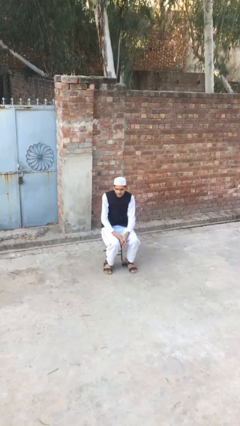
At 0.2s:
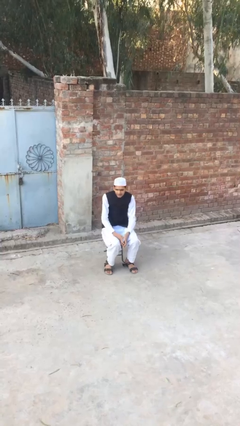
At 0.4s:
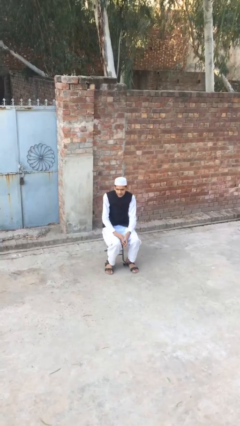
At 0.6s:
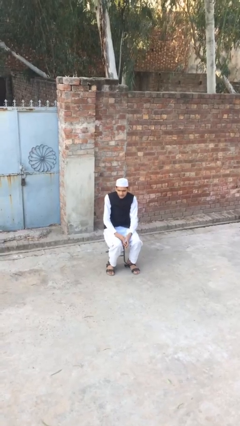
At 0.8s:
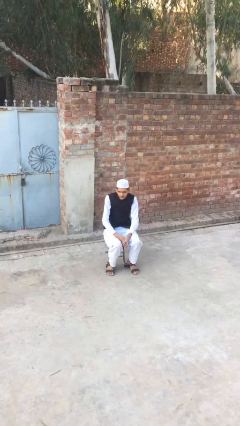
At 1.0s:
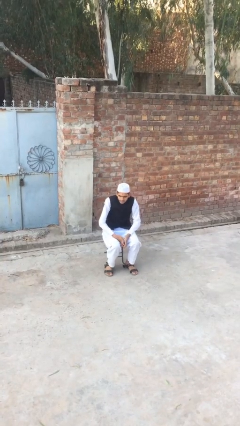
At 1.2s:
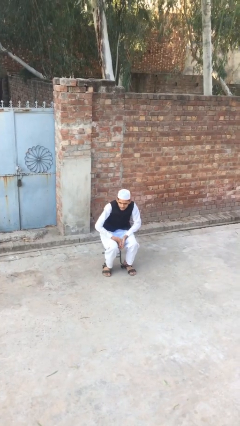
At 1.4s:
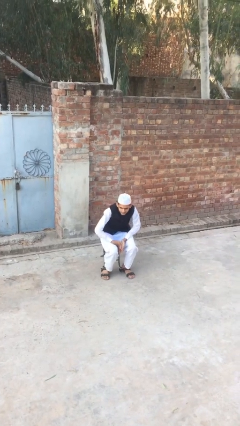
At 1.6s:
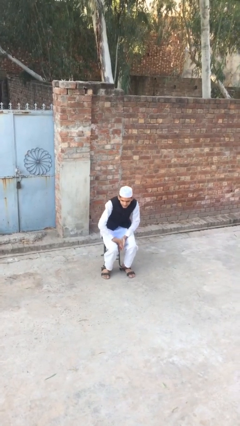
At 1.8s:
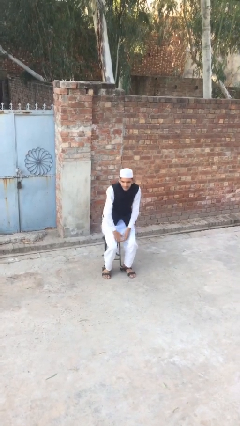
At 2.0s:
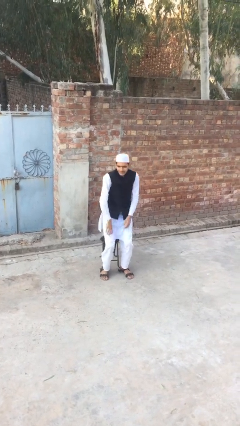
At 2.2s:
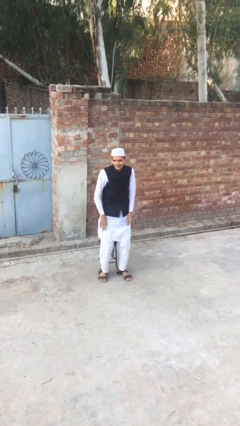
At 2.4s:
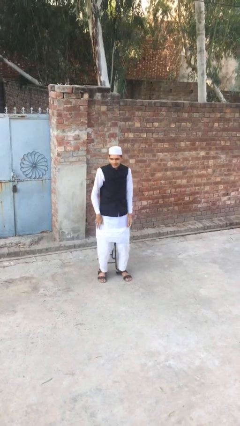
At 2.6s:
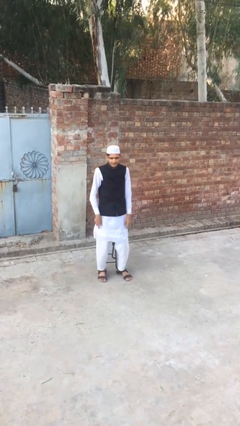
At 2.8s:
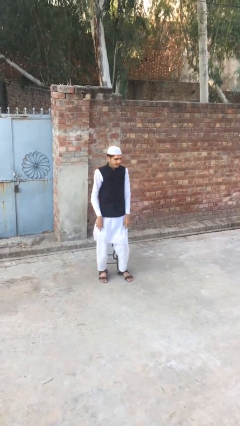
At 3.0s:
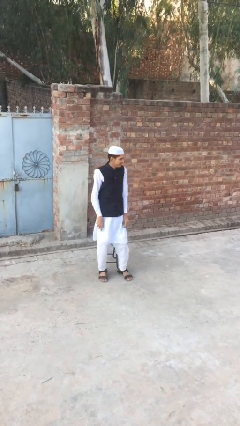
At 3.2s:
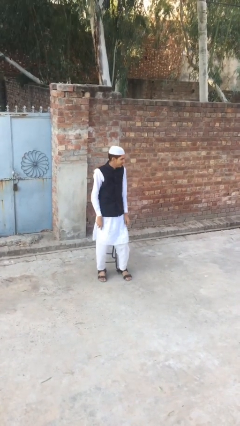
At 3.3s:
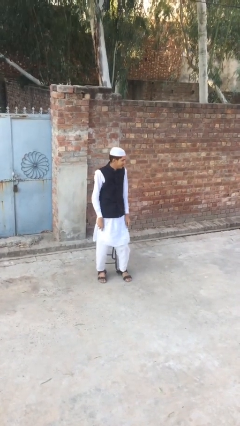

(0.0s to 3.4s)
person stands up

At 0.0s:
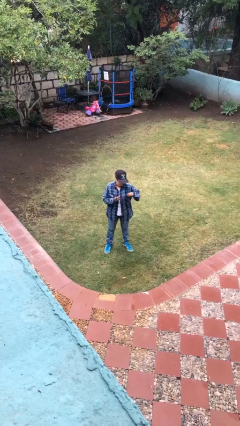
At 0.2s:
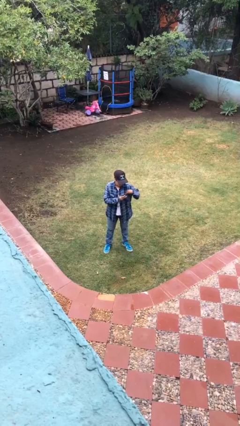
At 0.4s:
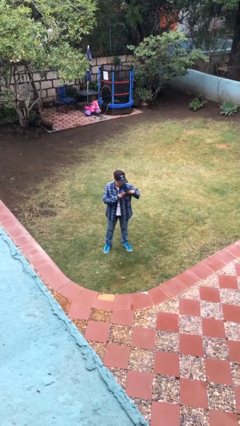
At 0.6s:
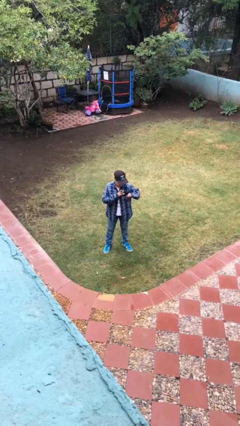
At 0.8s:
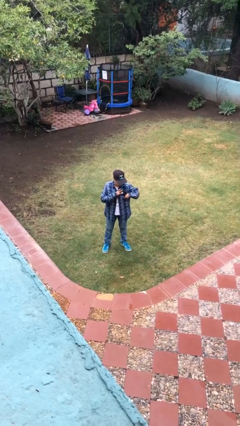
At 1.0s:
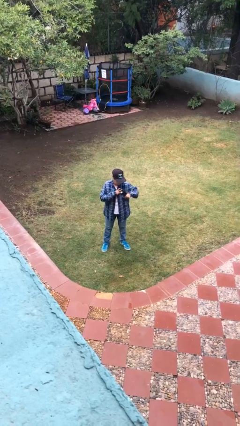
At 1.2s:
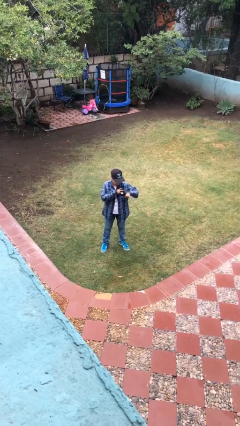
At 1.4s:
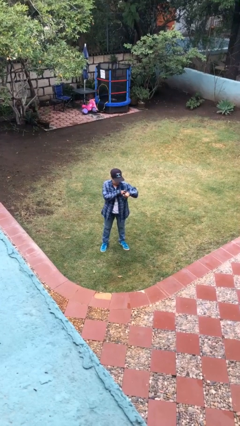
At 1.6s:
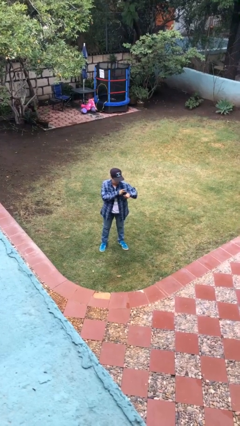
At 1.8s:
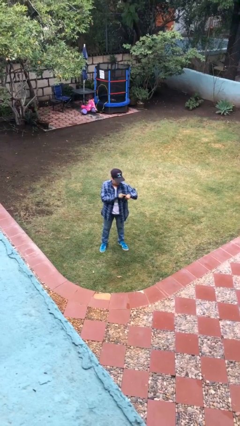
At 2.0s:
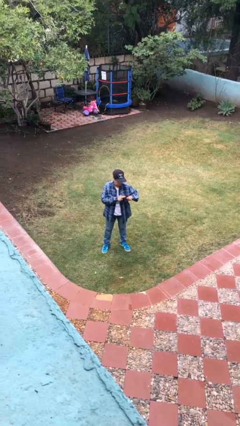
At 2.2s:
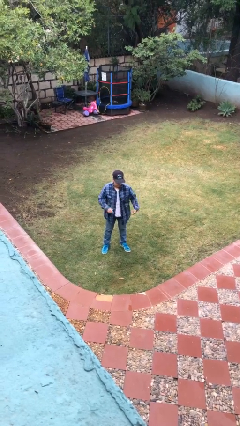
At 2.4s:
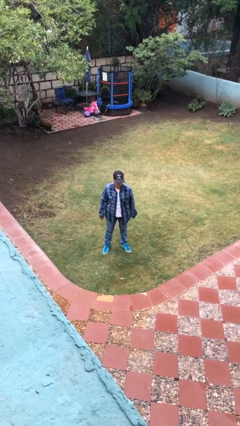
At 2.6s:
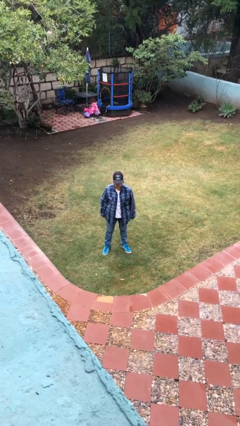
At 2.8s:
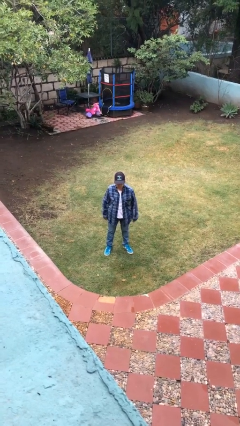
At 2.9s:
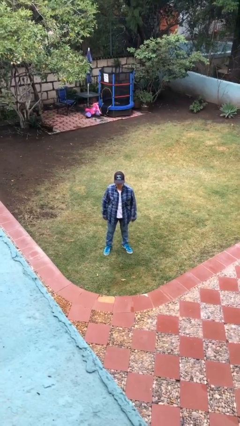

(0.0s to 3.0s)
person puts phone into pocket

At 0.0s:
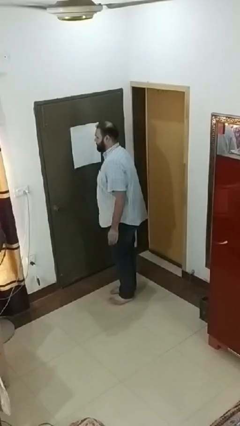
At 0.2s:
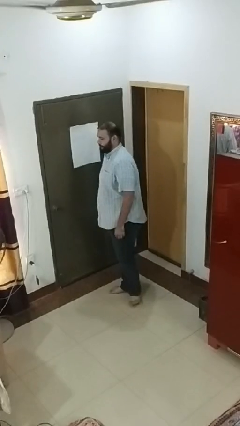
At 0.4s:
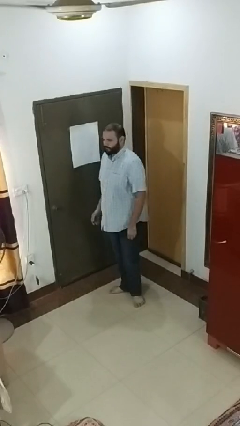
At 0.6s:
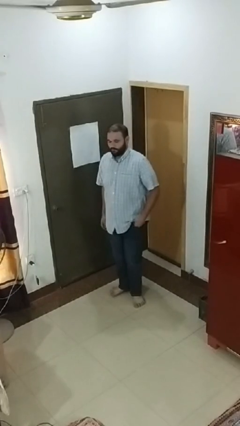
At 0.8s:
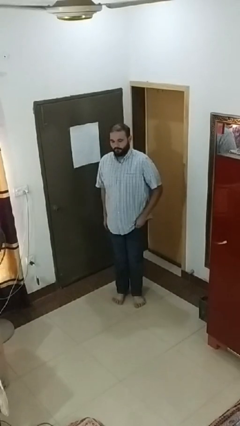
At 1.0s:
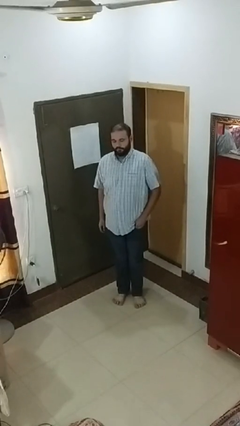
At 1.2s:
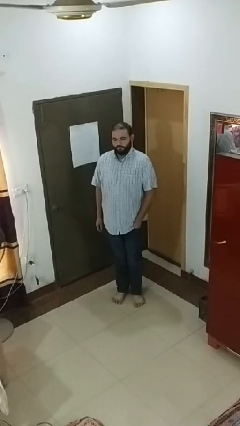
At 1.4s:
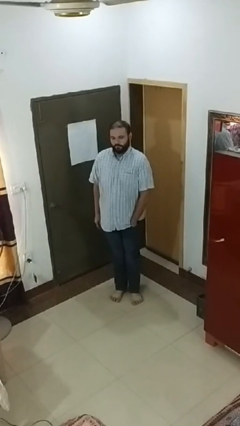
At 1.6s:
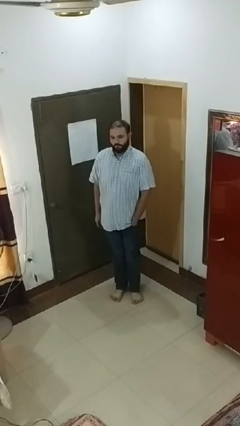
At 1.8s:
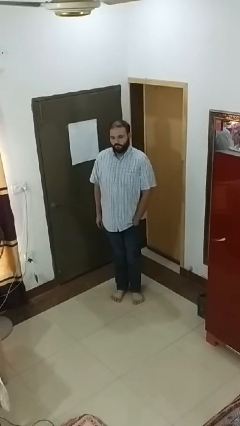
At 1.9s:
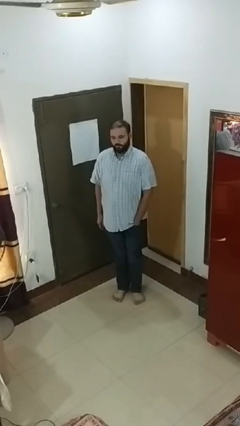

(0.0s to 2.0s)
person puts hands in back pockets

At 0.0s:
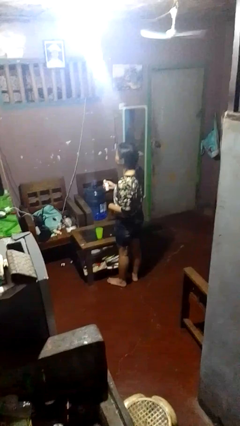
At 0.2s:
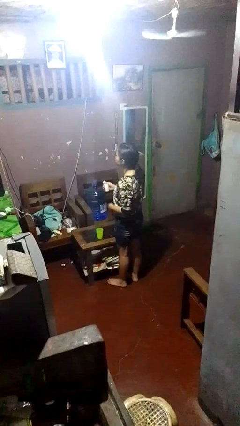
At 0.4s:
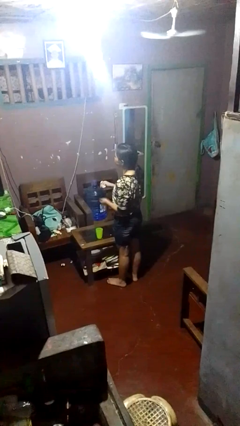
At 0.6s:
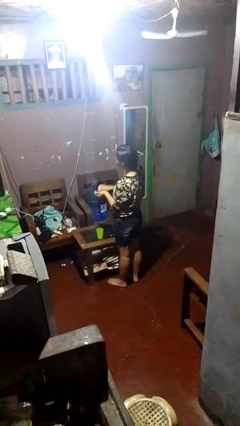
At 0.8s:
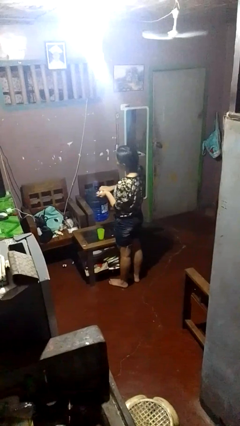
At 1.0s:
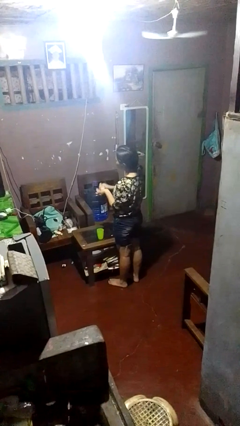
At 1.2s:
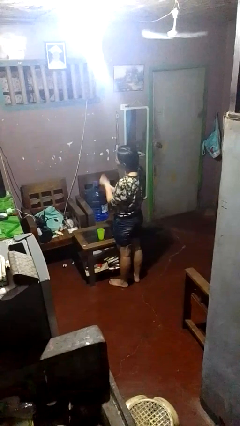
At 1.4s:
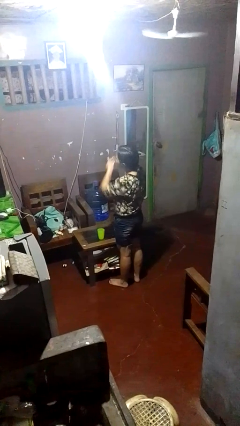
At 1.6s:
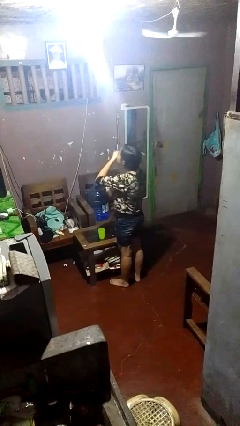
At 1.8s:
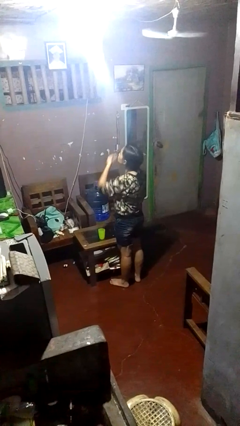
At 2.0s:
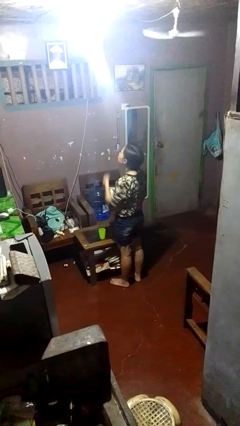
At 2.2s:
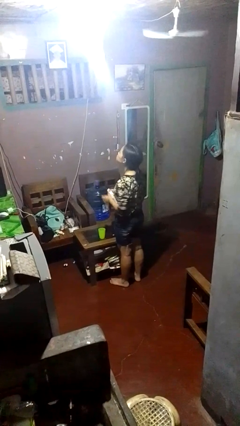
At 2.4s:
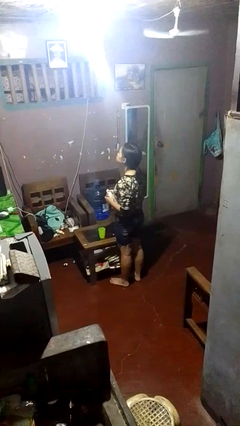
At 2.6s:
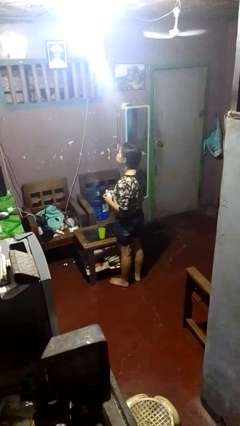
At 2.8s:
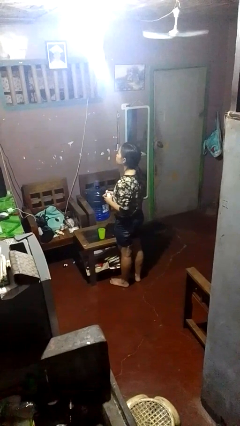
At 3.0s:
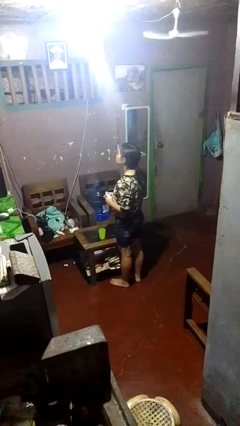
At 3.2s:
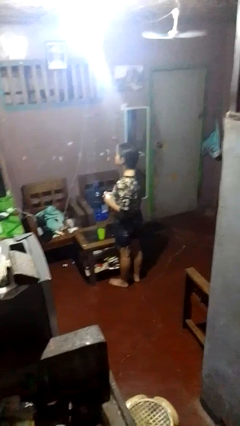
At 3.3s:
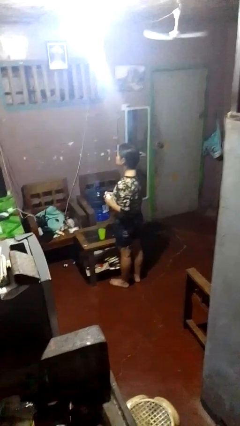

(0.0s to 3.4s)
person takes medicine pills

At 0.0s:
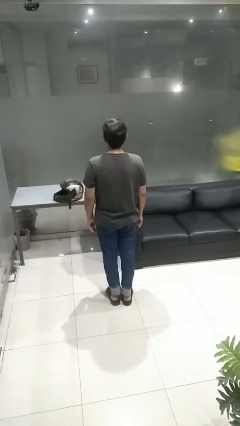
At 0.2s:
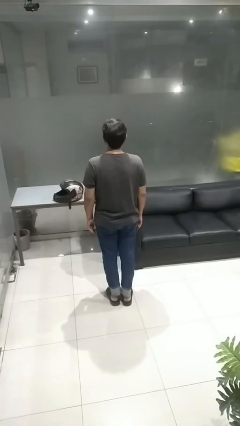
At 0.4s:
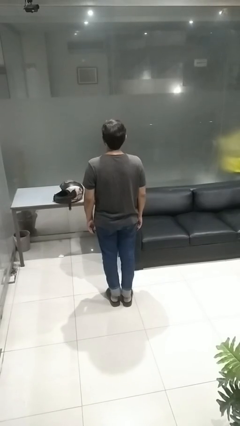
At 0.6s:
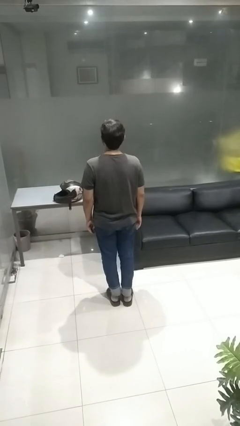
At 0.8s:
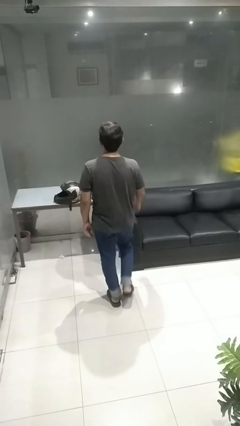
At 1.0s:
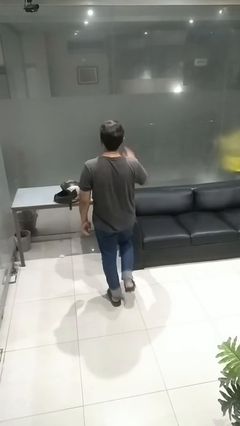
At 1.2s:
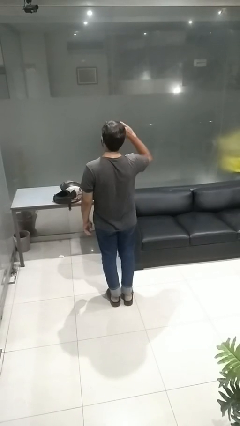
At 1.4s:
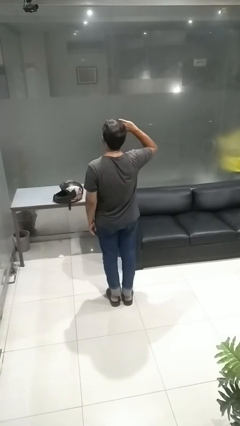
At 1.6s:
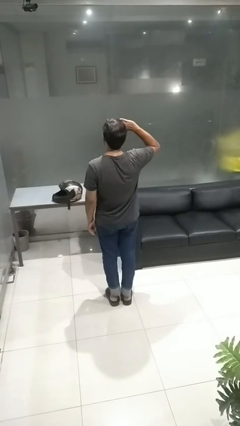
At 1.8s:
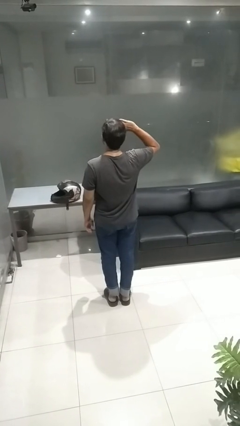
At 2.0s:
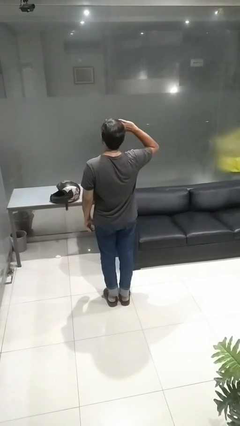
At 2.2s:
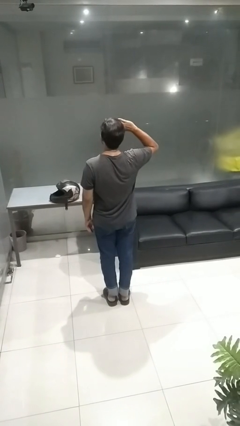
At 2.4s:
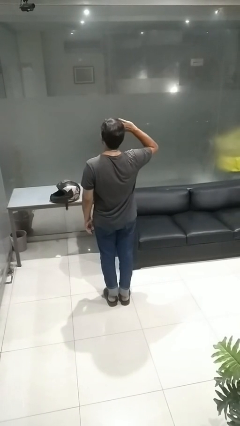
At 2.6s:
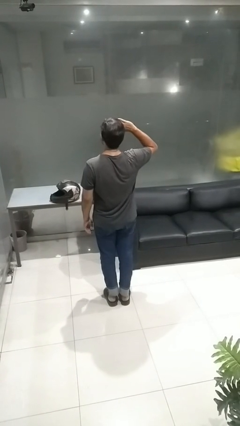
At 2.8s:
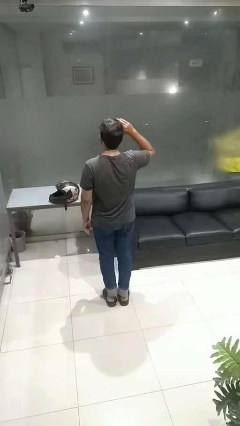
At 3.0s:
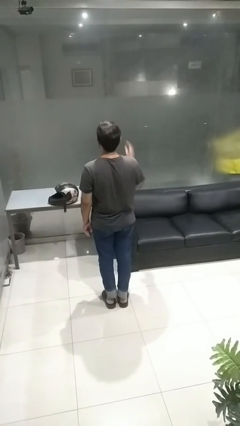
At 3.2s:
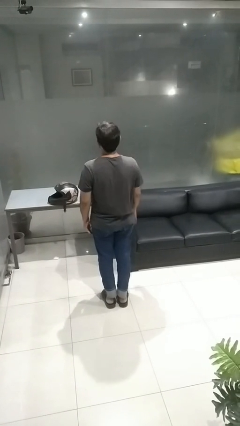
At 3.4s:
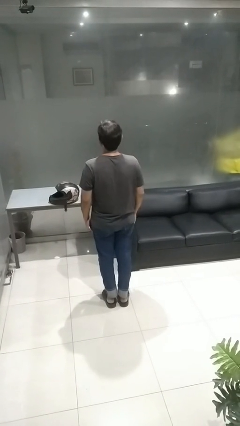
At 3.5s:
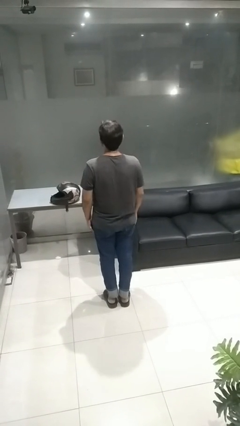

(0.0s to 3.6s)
person salutes

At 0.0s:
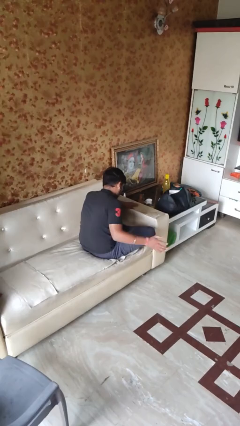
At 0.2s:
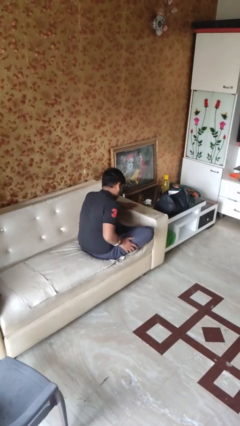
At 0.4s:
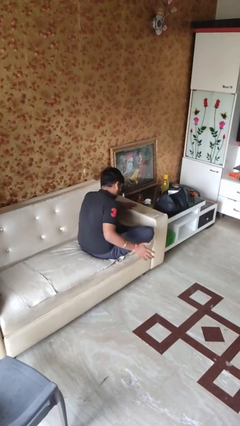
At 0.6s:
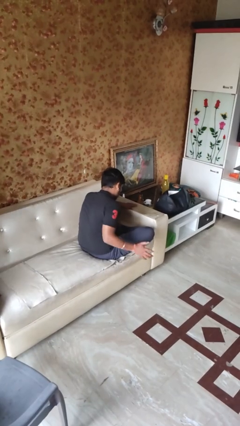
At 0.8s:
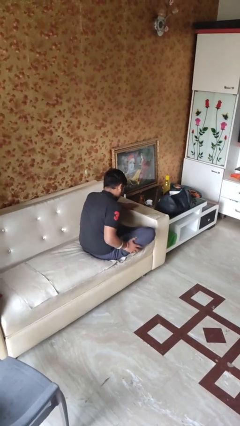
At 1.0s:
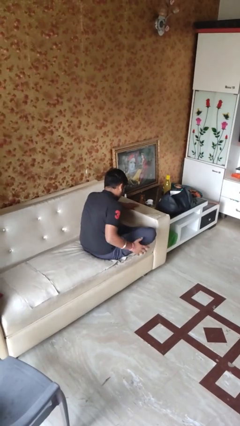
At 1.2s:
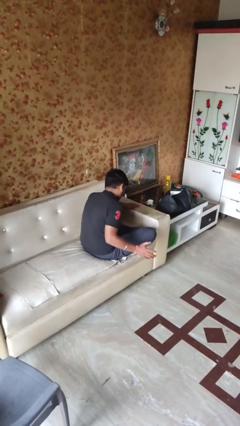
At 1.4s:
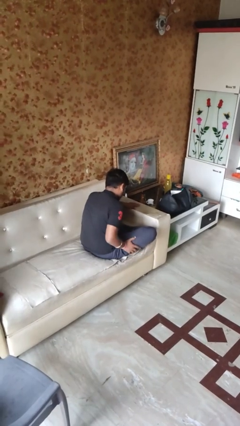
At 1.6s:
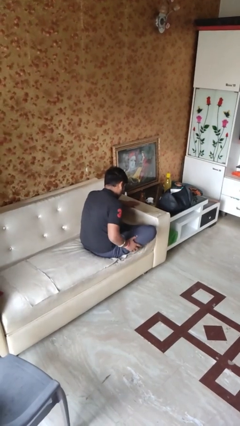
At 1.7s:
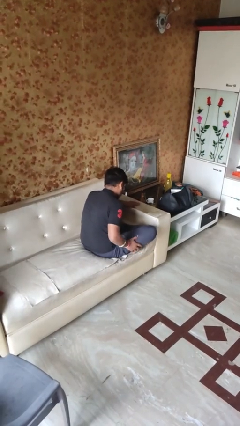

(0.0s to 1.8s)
person slaps hands on thighs

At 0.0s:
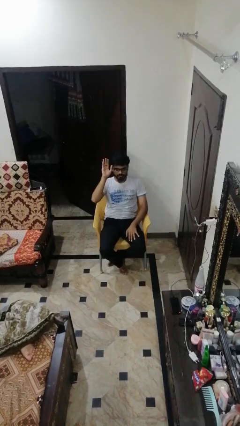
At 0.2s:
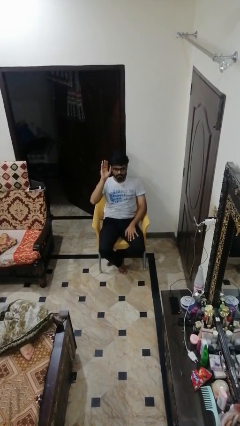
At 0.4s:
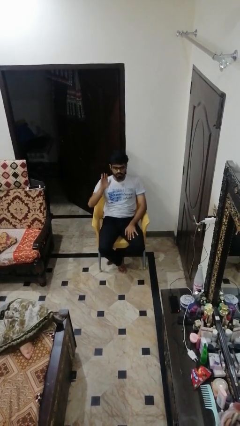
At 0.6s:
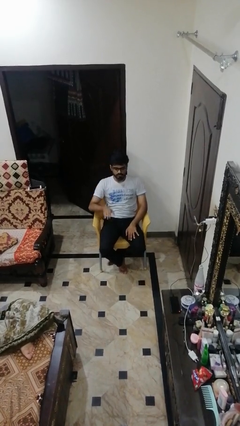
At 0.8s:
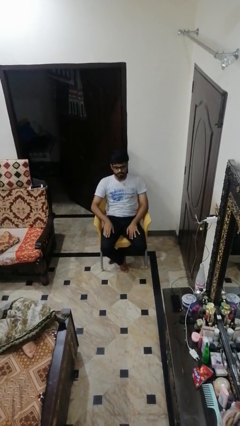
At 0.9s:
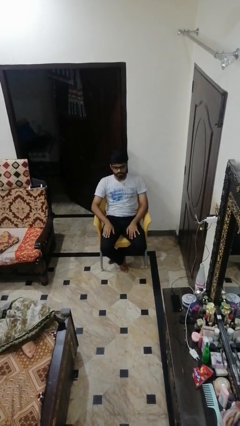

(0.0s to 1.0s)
person gestures lower hand
